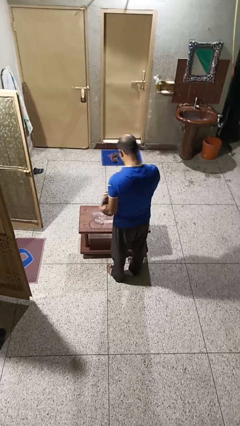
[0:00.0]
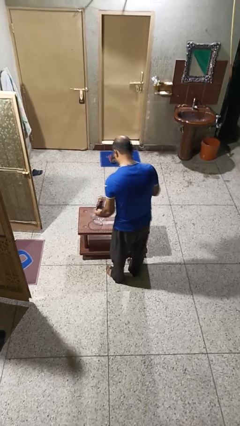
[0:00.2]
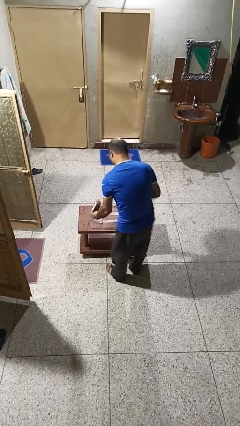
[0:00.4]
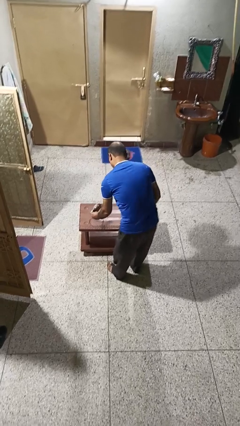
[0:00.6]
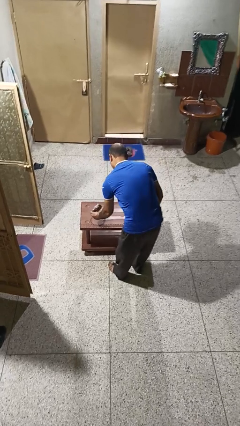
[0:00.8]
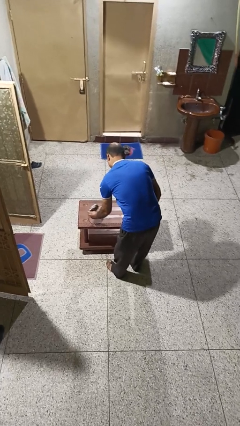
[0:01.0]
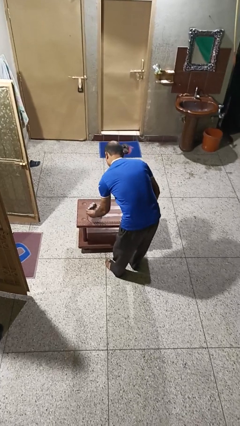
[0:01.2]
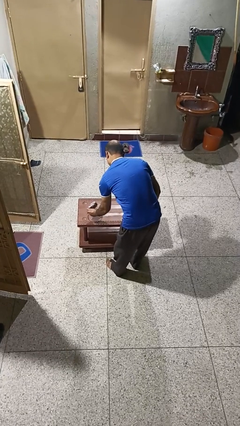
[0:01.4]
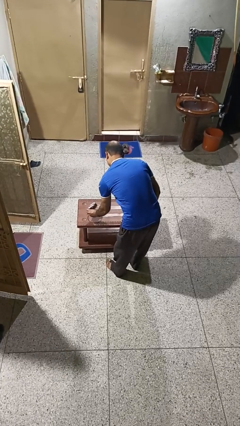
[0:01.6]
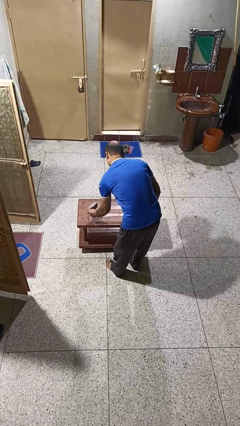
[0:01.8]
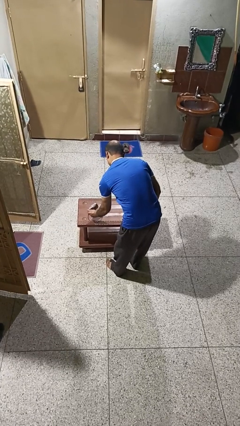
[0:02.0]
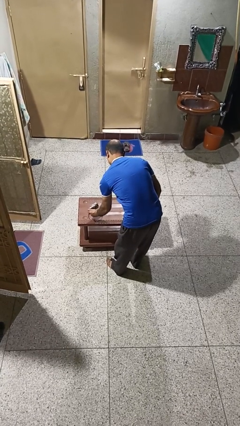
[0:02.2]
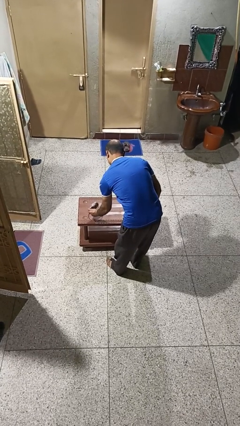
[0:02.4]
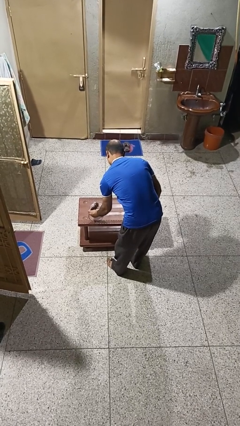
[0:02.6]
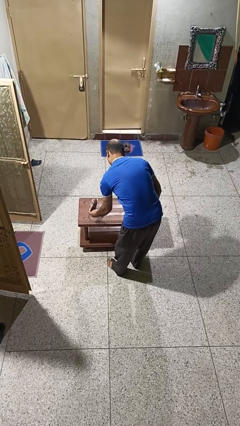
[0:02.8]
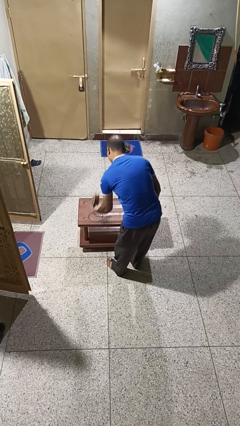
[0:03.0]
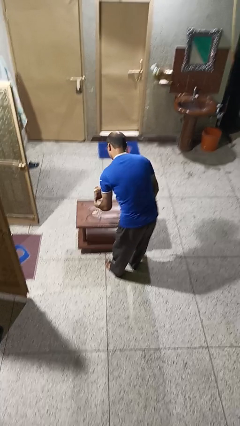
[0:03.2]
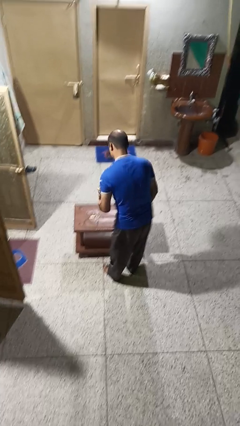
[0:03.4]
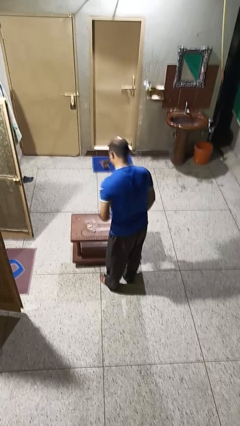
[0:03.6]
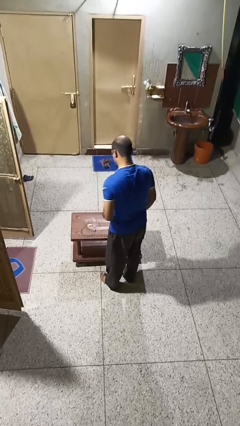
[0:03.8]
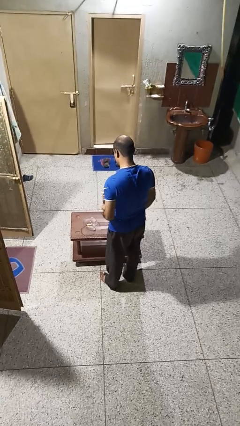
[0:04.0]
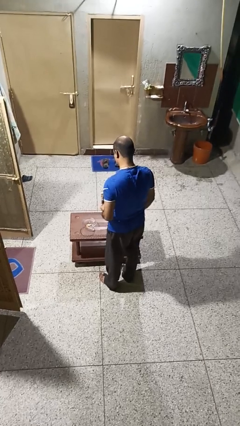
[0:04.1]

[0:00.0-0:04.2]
person pours into bowl

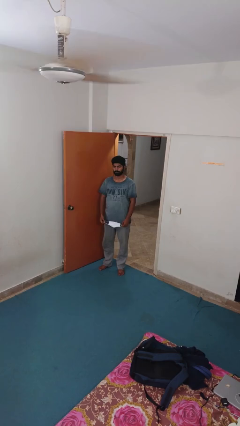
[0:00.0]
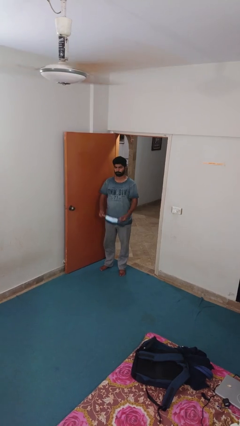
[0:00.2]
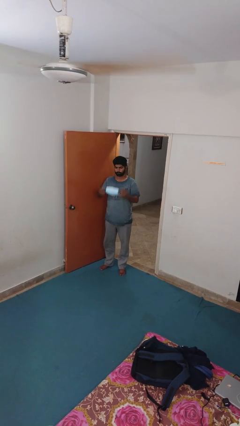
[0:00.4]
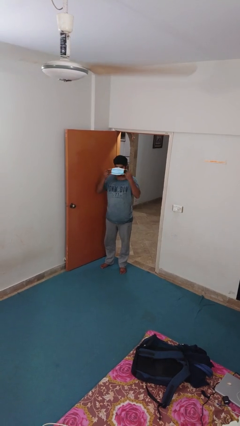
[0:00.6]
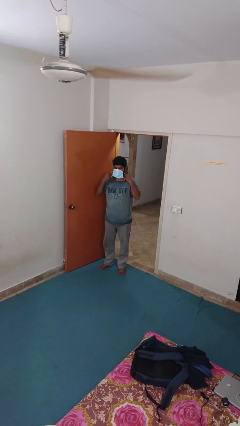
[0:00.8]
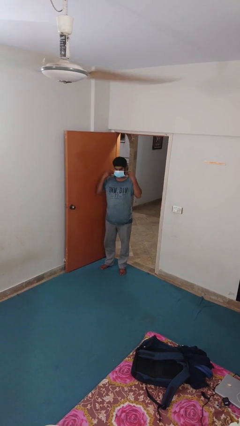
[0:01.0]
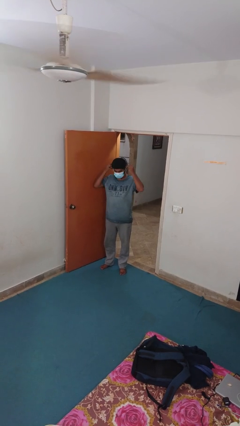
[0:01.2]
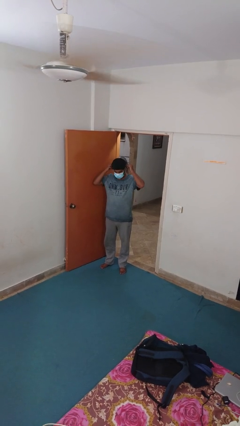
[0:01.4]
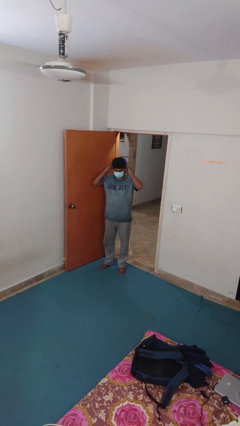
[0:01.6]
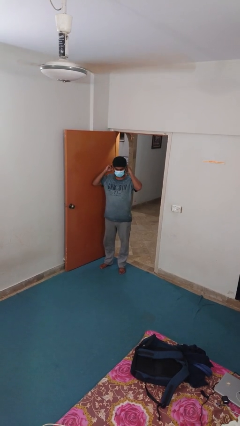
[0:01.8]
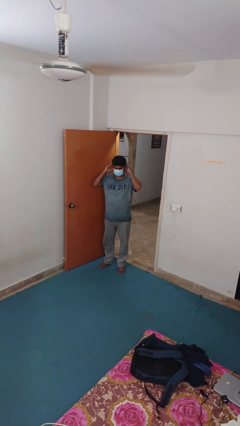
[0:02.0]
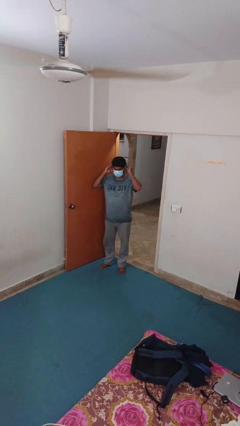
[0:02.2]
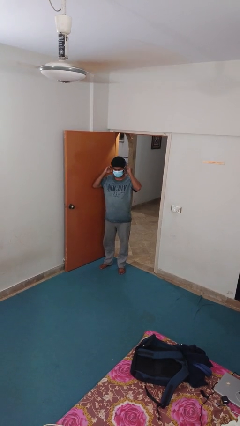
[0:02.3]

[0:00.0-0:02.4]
person puts on facemask

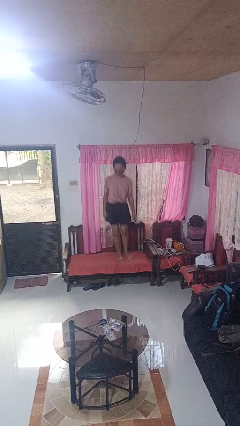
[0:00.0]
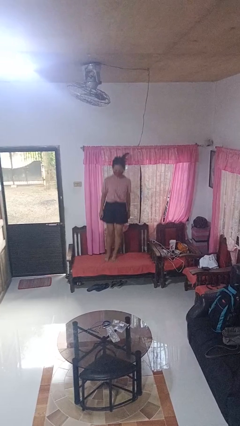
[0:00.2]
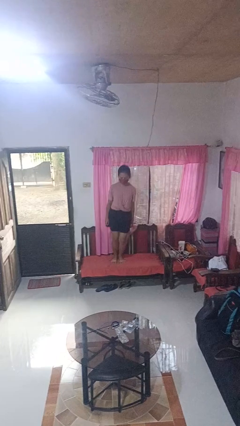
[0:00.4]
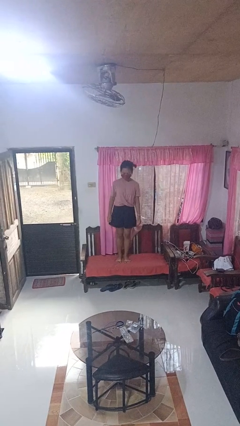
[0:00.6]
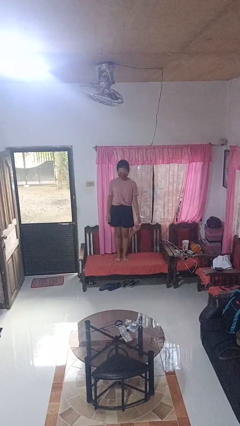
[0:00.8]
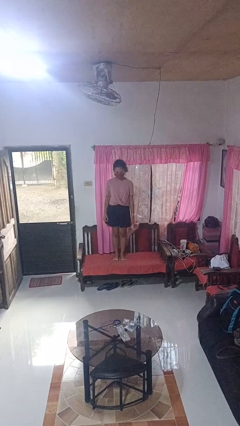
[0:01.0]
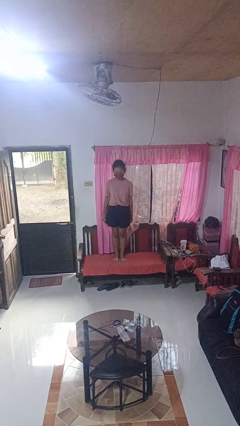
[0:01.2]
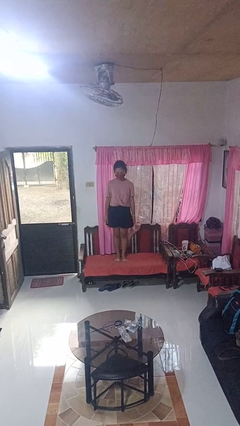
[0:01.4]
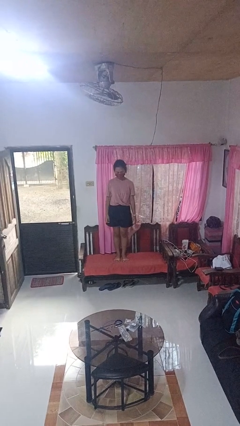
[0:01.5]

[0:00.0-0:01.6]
person jumps on couch

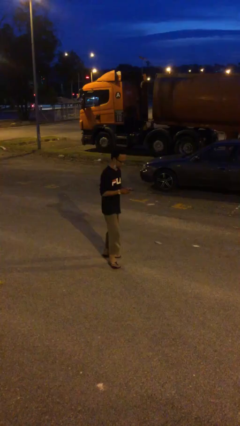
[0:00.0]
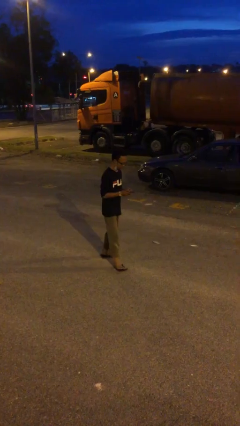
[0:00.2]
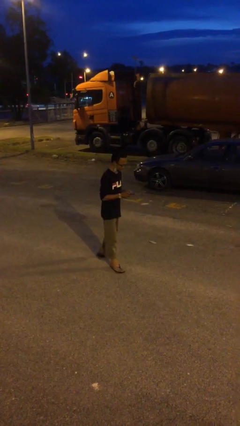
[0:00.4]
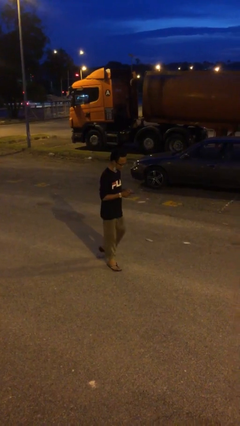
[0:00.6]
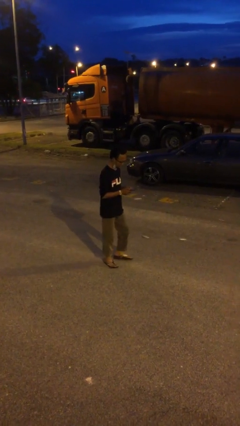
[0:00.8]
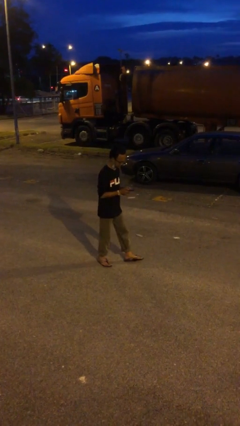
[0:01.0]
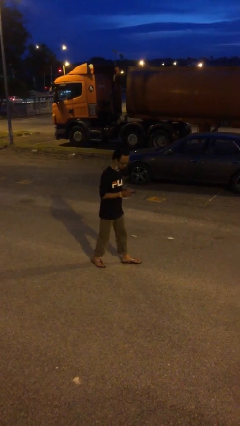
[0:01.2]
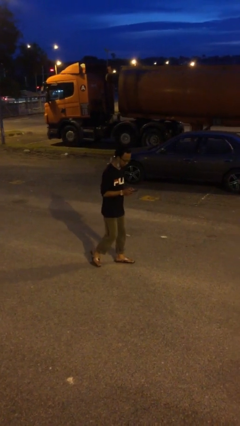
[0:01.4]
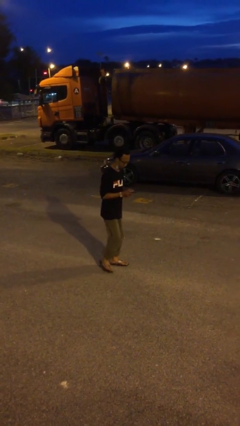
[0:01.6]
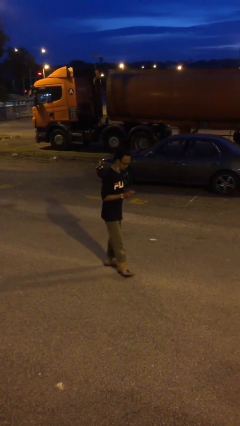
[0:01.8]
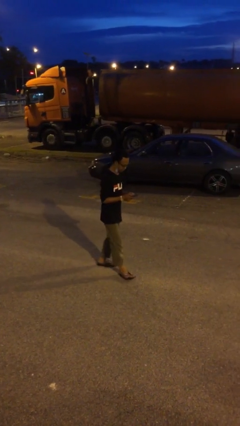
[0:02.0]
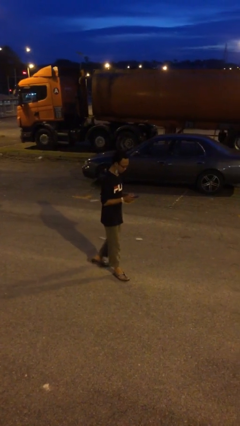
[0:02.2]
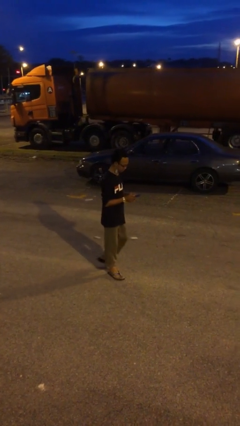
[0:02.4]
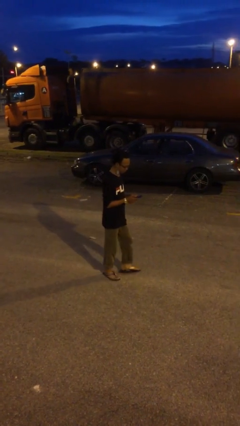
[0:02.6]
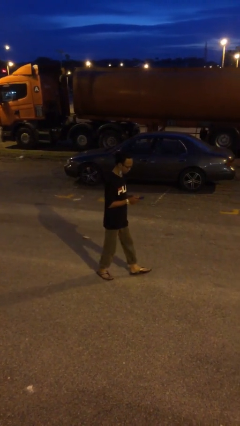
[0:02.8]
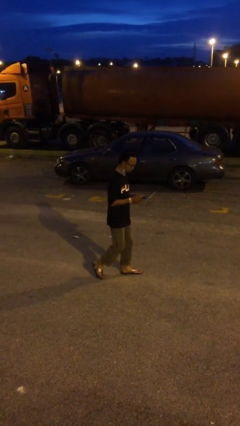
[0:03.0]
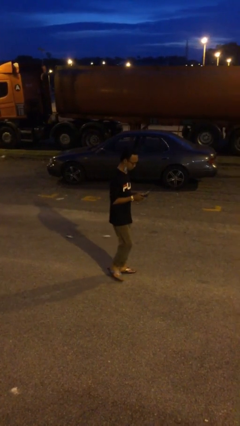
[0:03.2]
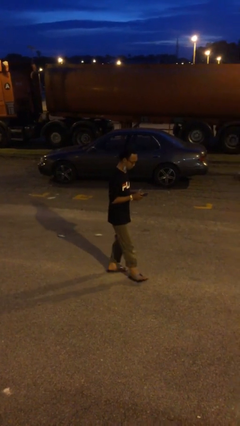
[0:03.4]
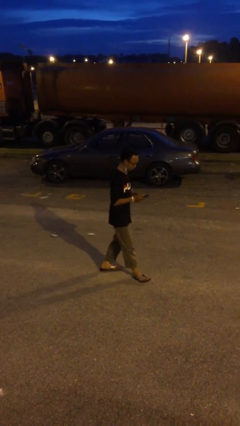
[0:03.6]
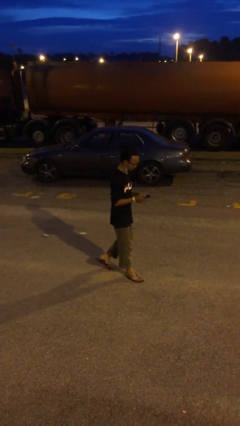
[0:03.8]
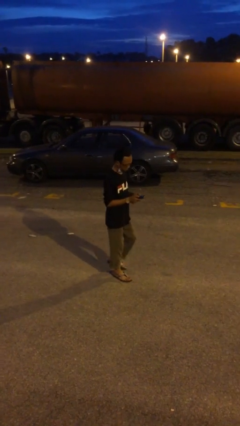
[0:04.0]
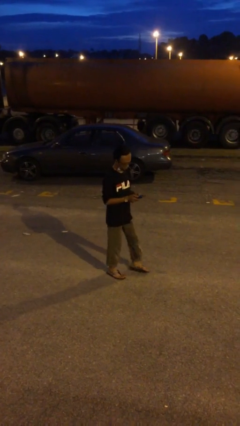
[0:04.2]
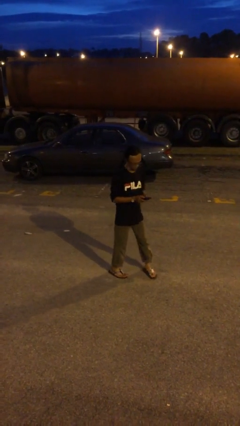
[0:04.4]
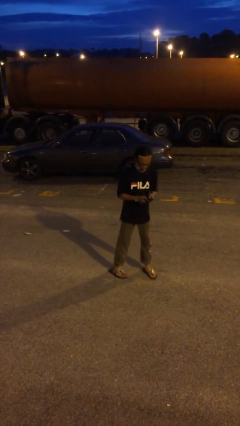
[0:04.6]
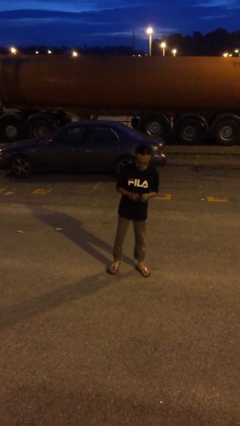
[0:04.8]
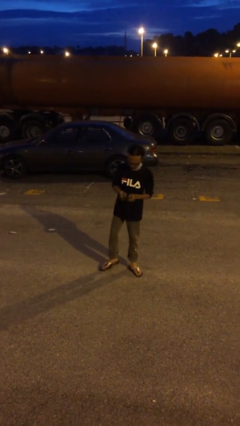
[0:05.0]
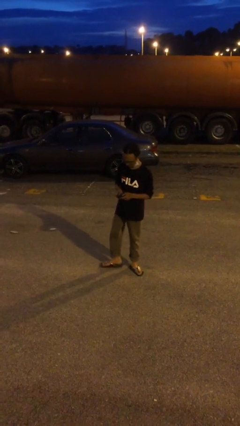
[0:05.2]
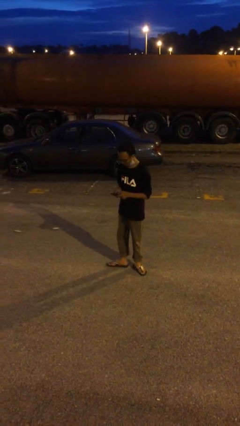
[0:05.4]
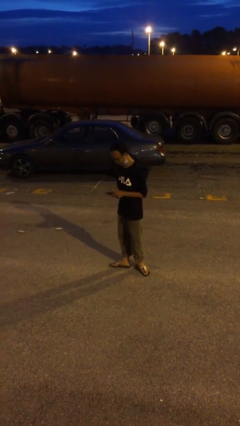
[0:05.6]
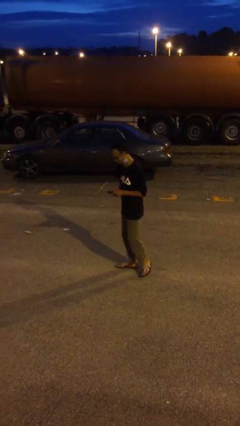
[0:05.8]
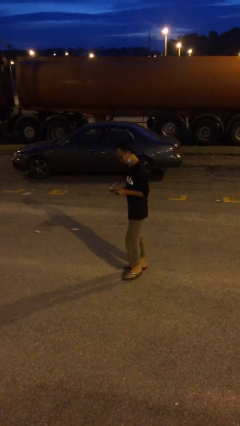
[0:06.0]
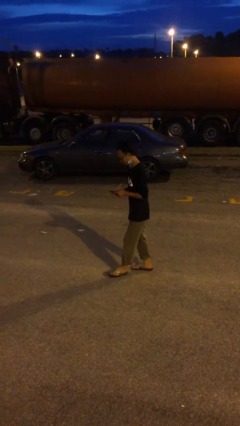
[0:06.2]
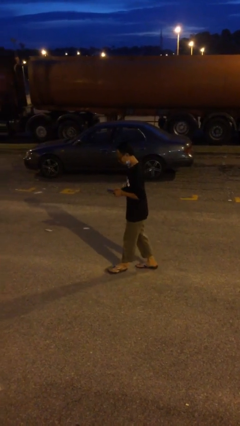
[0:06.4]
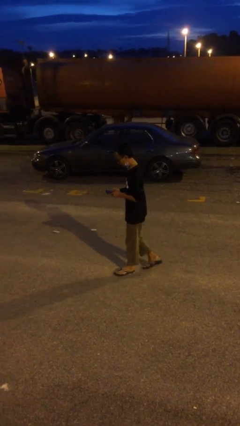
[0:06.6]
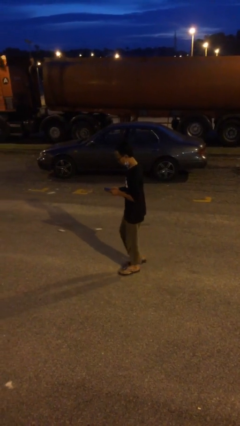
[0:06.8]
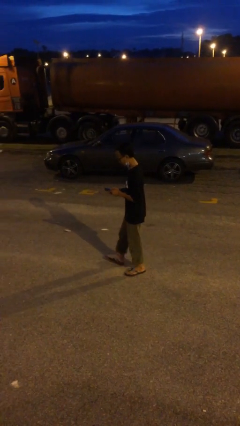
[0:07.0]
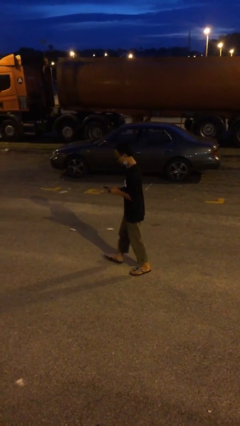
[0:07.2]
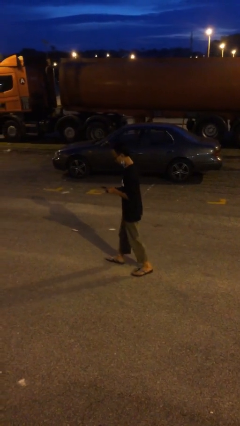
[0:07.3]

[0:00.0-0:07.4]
person texts on phone

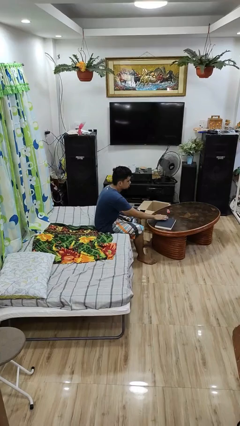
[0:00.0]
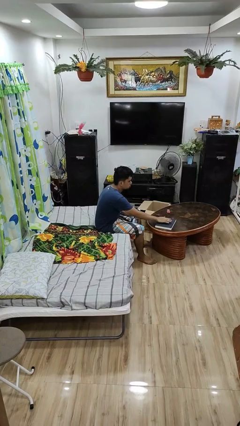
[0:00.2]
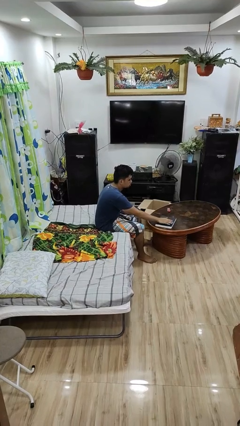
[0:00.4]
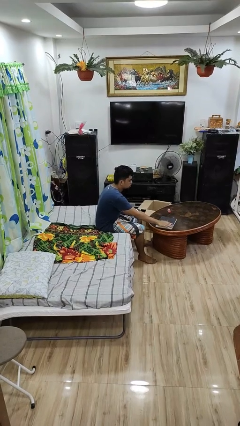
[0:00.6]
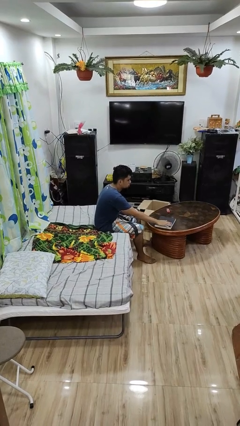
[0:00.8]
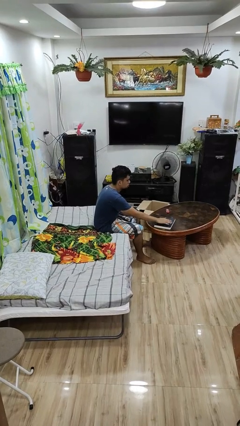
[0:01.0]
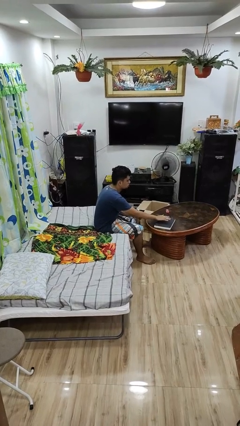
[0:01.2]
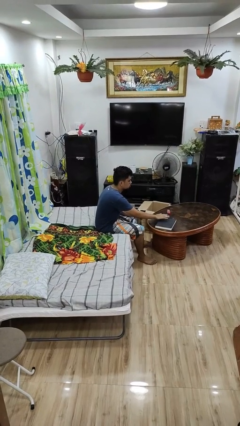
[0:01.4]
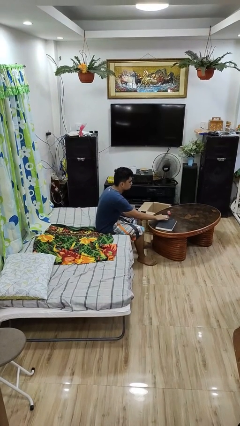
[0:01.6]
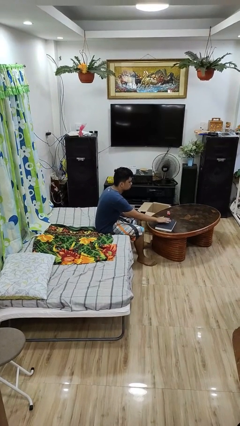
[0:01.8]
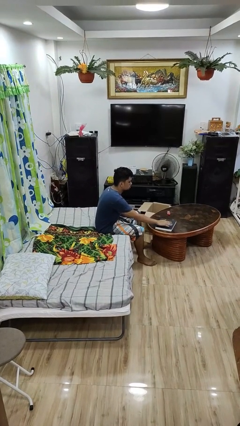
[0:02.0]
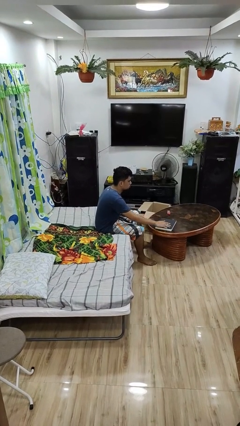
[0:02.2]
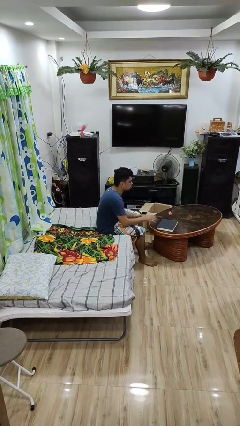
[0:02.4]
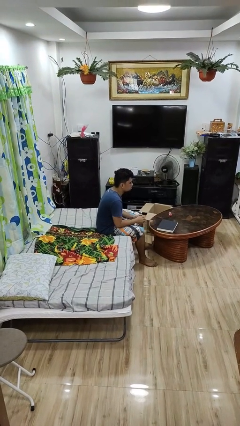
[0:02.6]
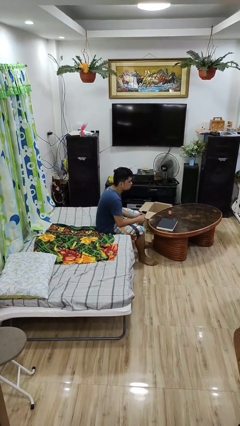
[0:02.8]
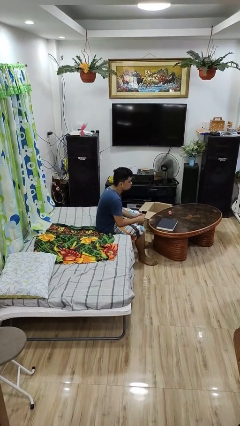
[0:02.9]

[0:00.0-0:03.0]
person waves hand over object
